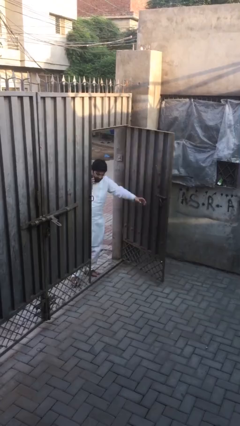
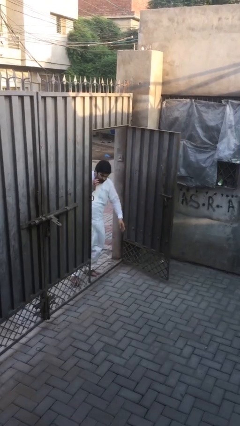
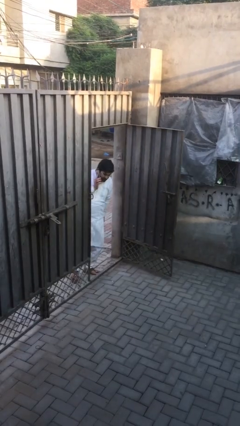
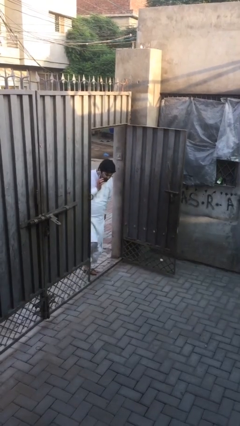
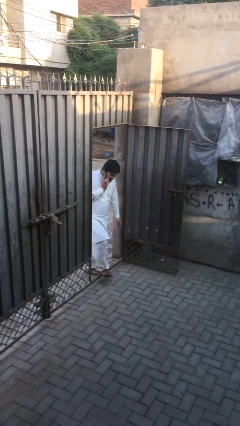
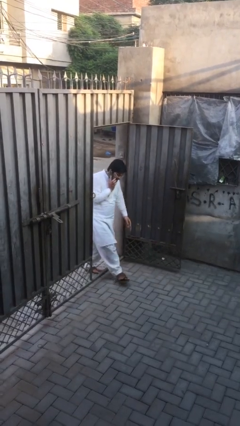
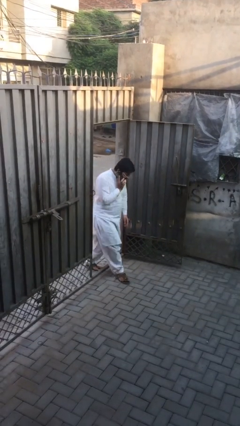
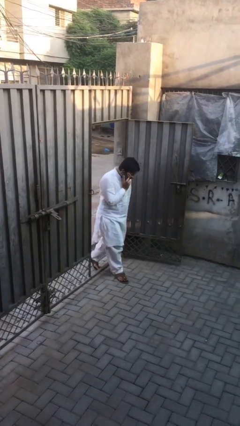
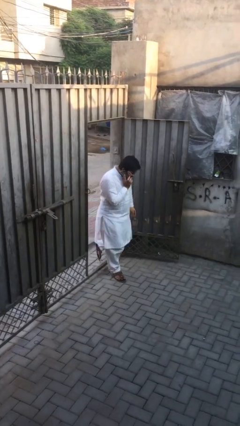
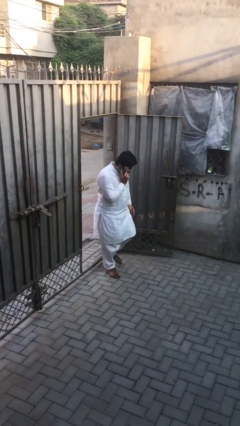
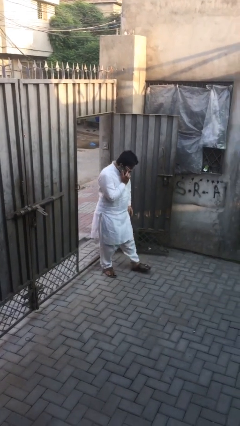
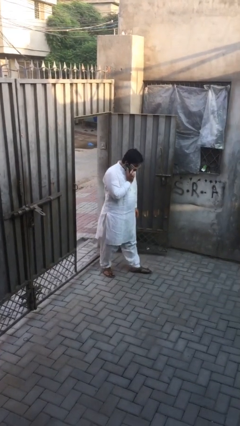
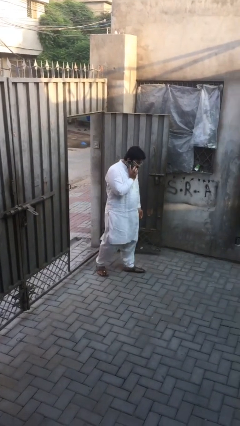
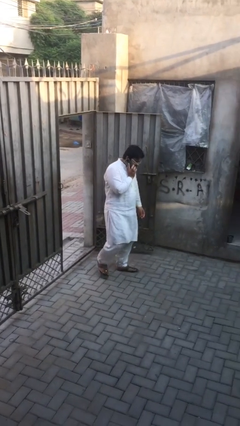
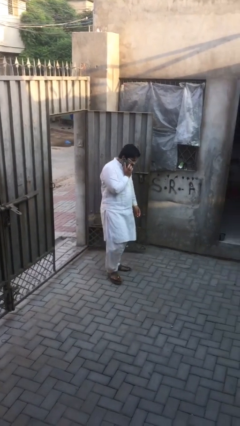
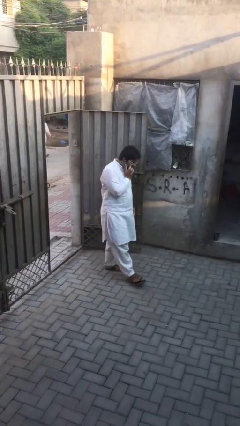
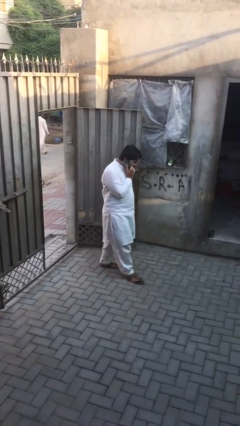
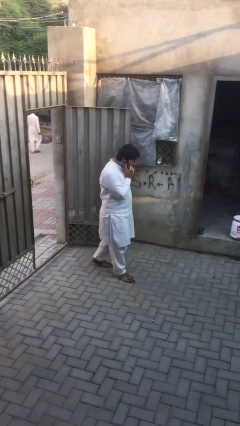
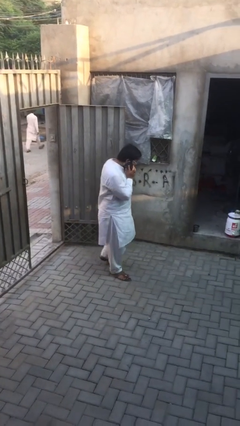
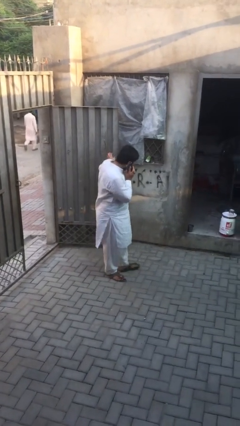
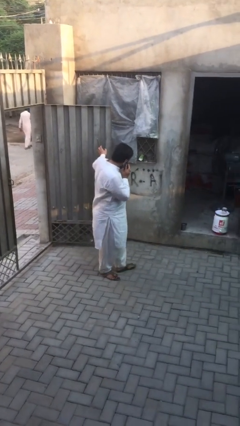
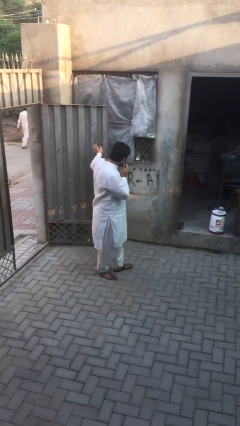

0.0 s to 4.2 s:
person enters scene through structure

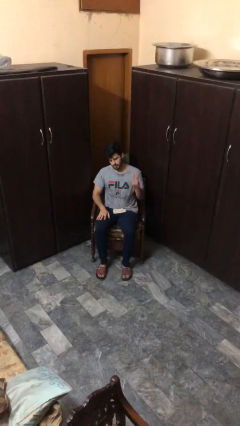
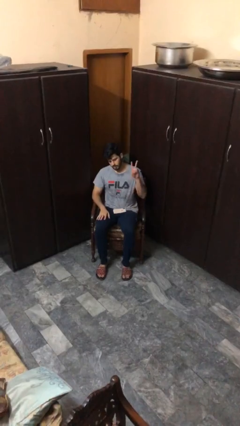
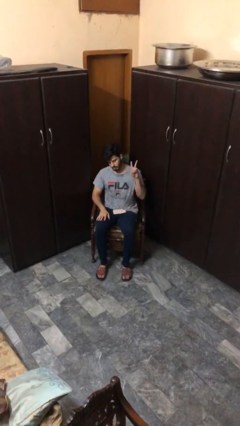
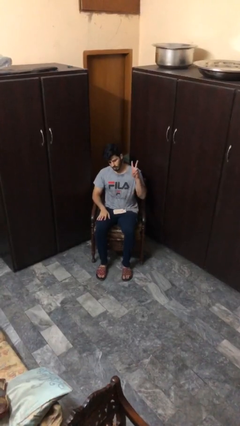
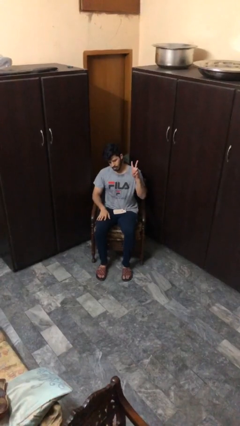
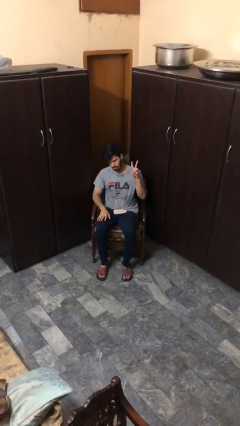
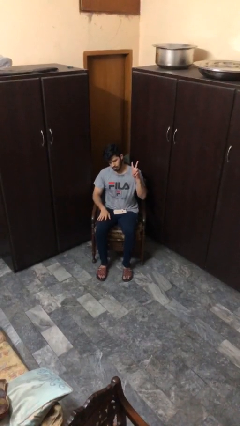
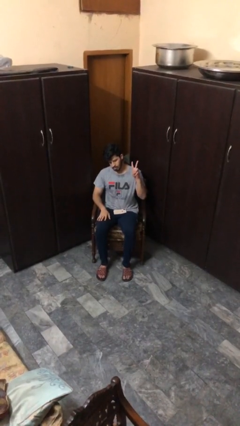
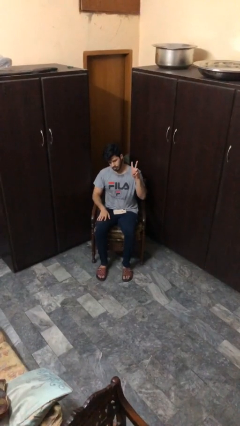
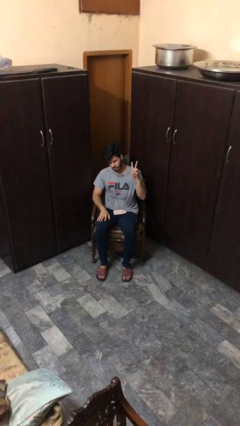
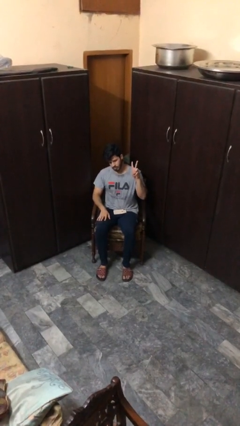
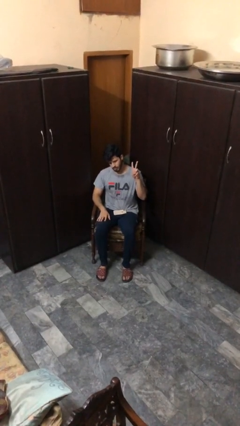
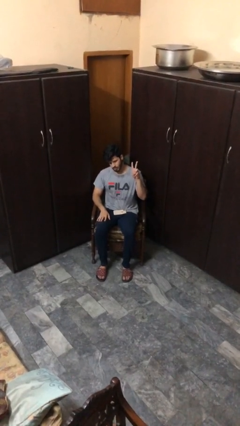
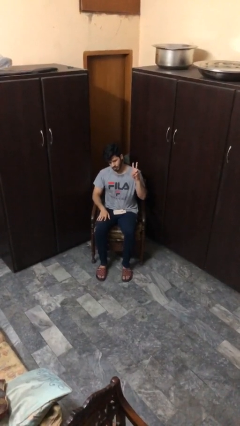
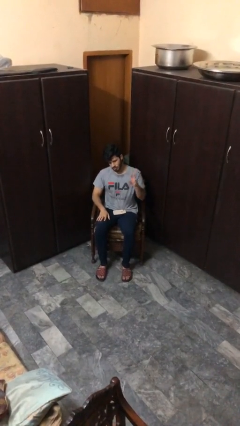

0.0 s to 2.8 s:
person gestures peace

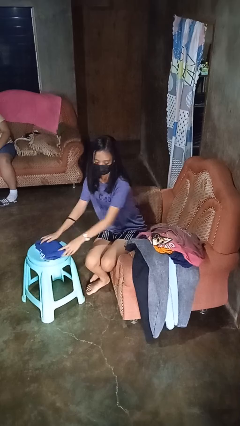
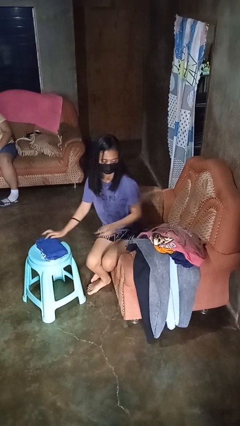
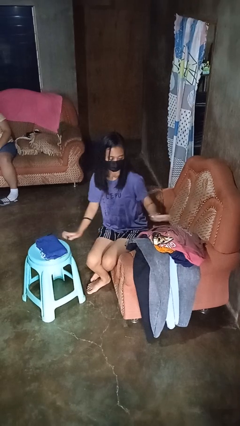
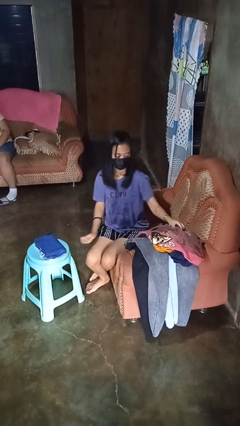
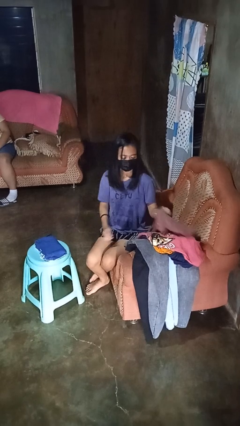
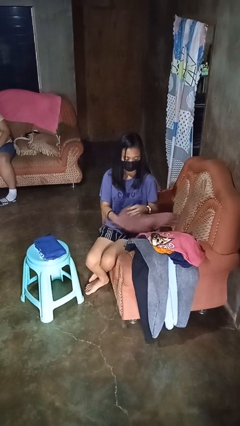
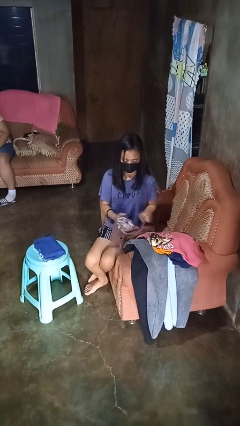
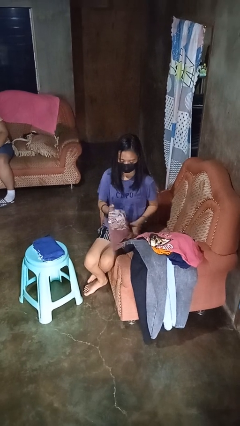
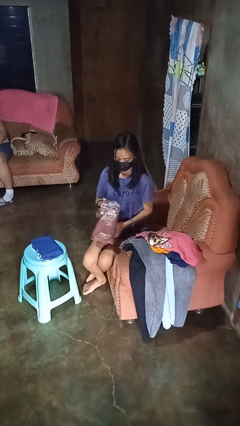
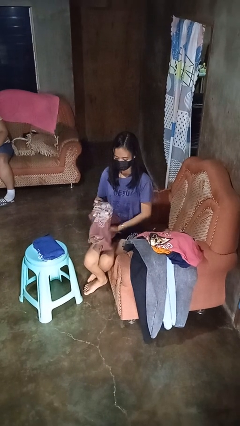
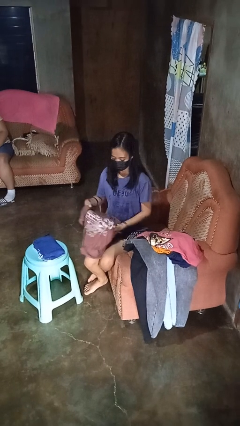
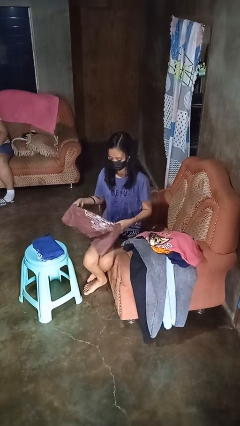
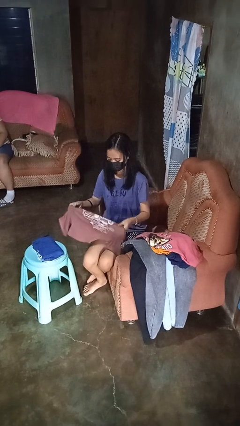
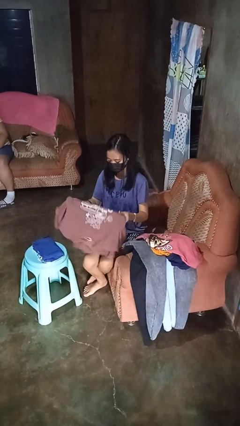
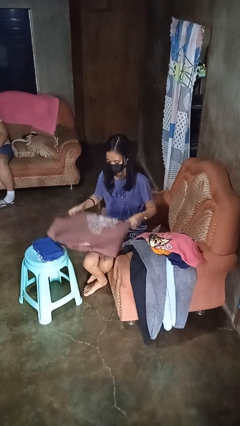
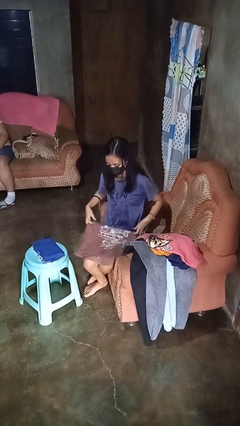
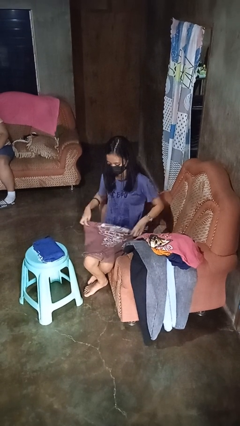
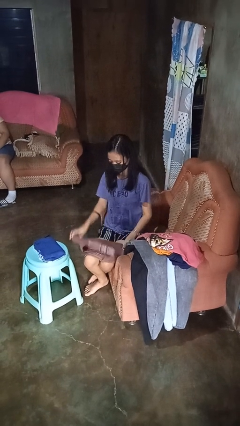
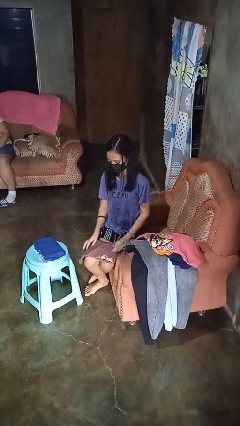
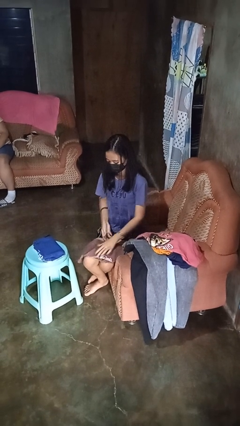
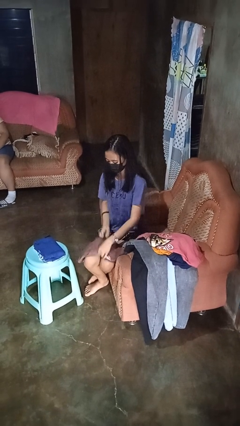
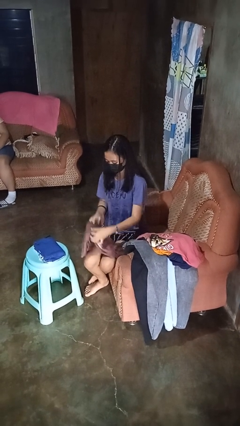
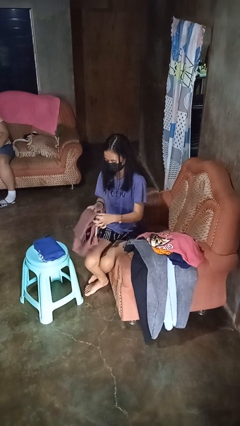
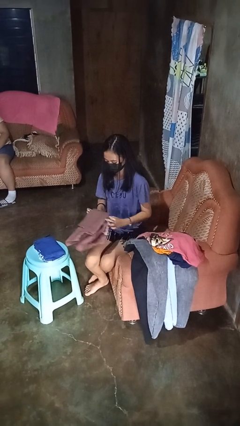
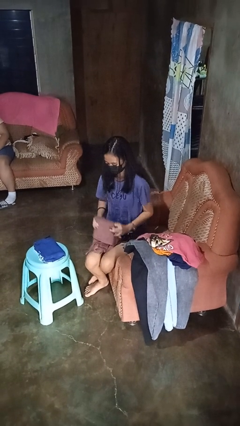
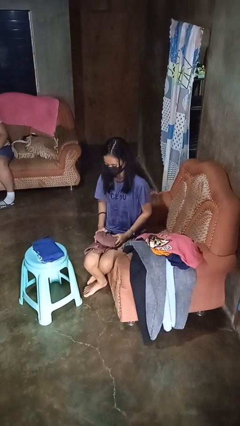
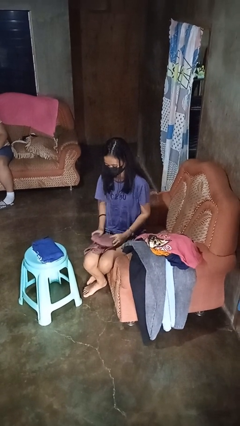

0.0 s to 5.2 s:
person folds shirt

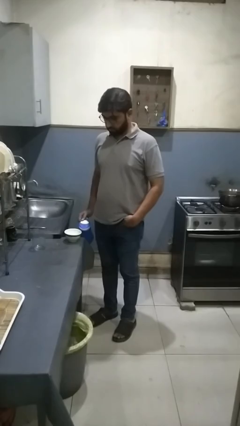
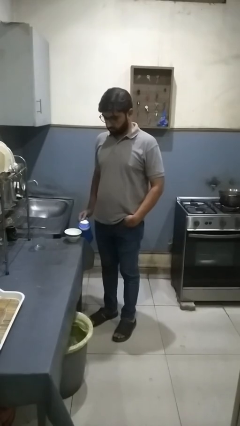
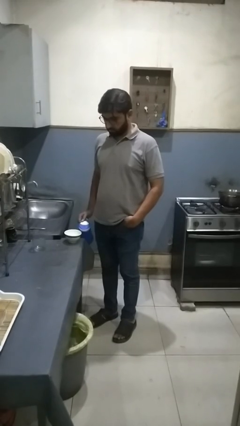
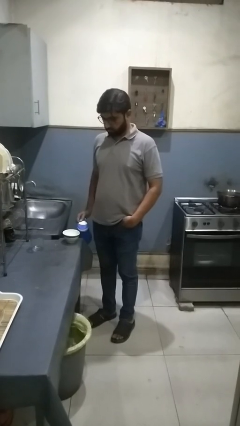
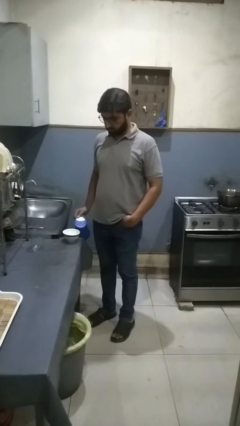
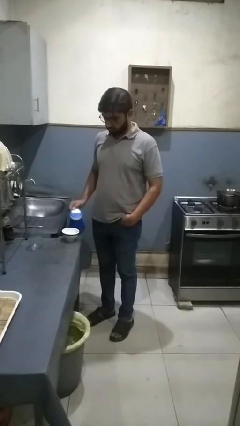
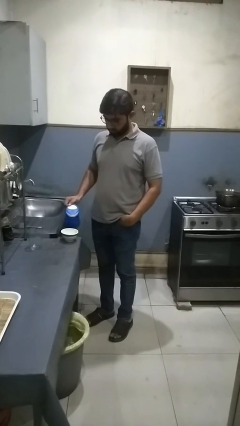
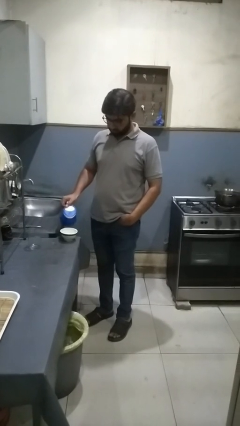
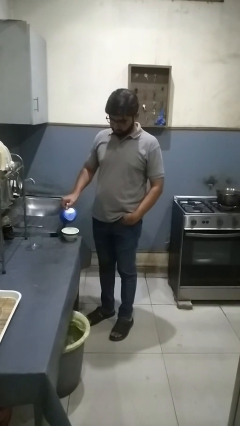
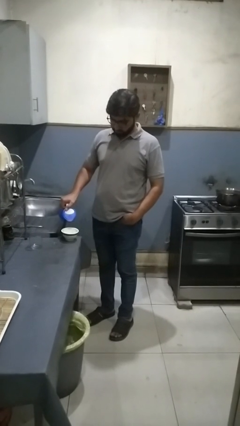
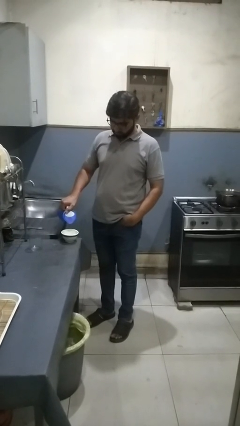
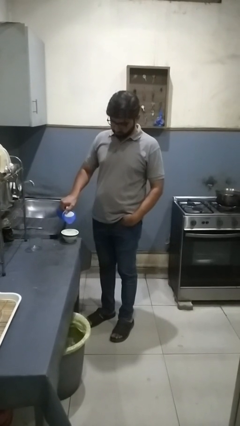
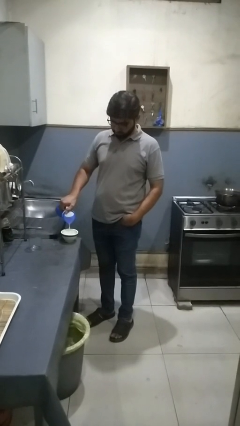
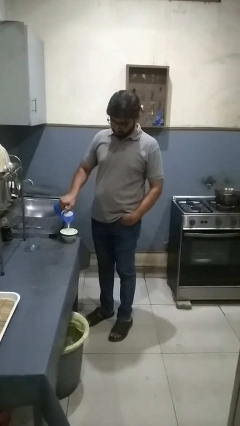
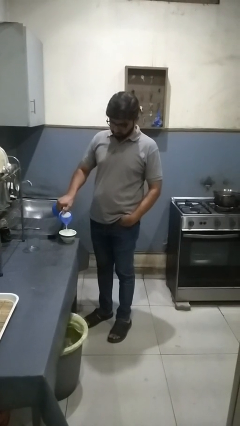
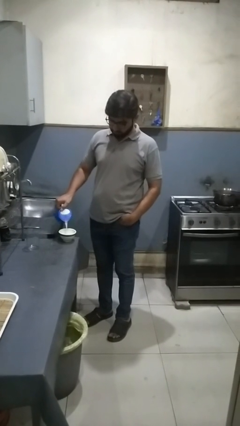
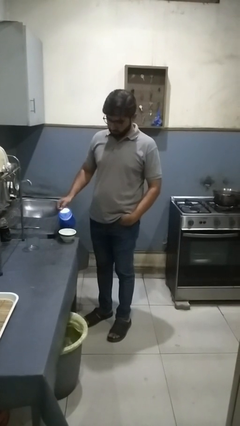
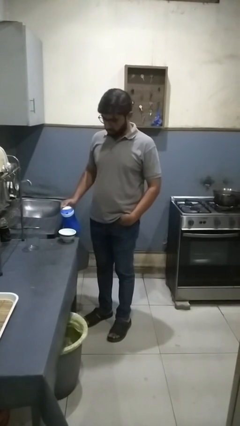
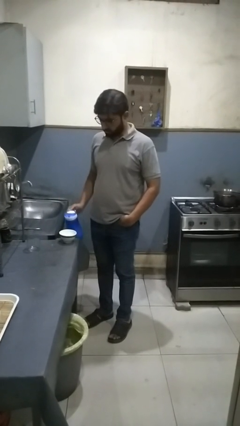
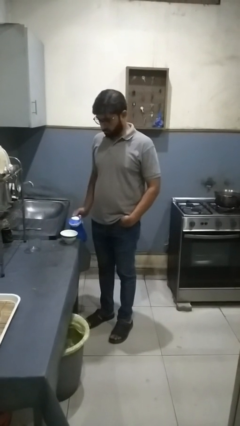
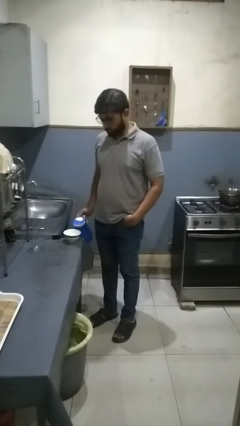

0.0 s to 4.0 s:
person pours into bowl

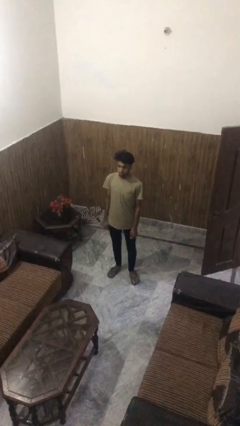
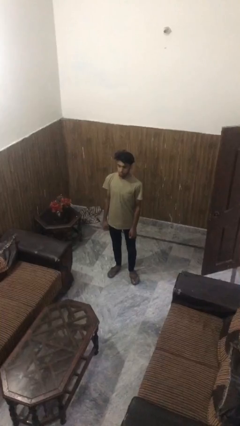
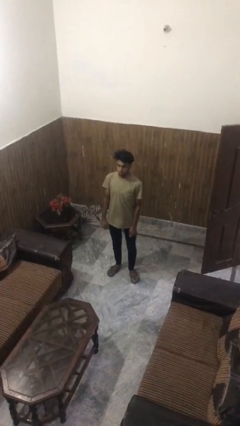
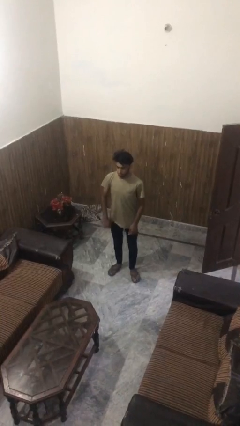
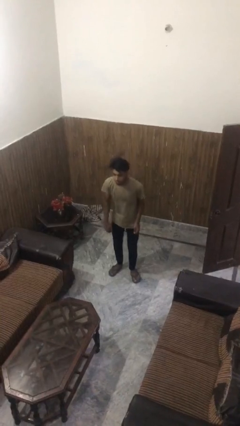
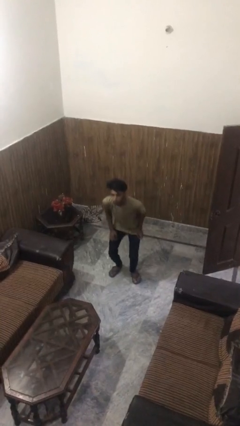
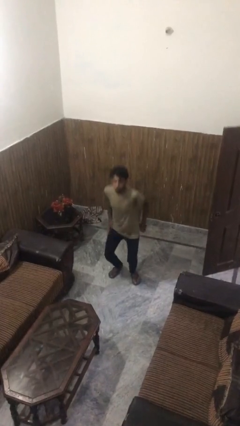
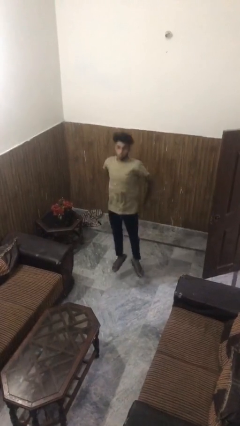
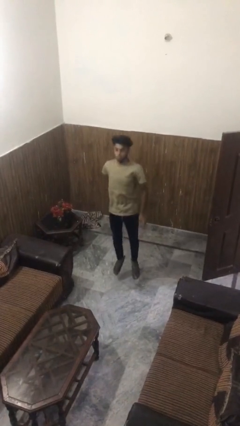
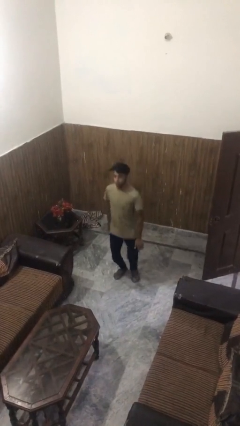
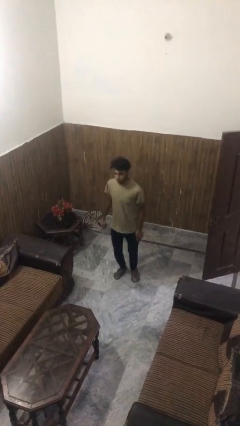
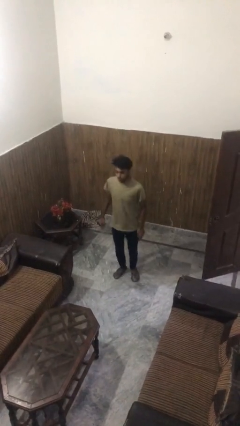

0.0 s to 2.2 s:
person jumps
